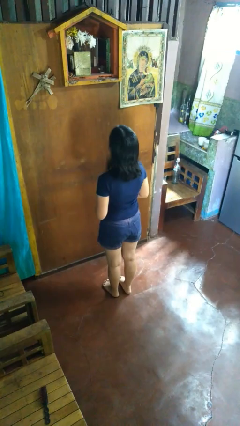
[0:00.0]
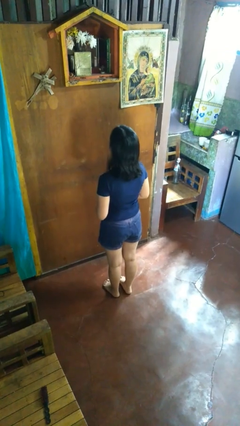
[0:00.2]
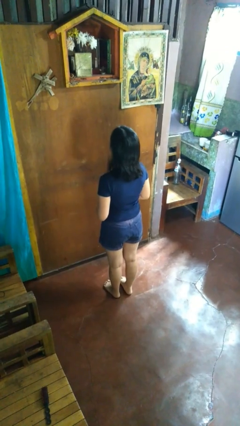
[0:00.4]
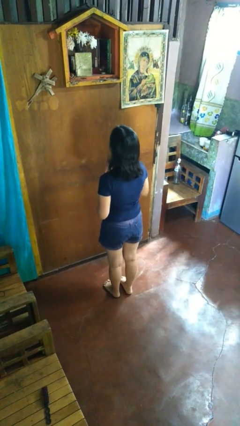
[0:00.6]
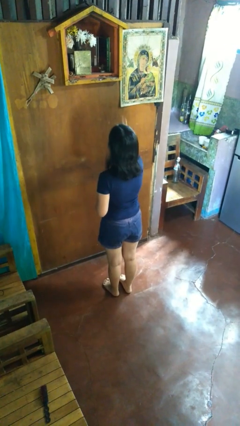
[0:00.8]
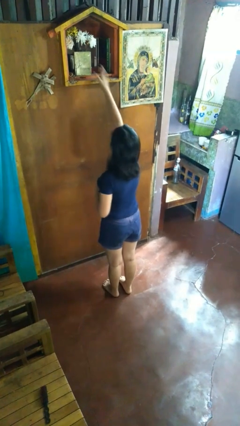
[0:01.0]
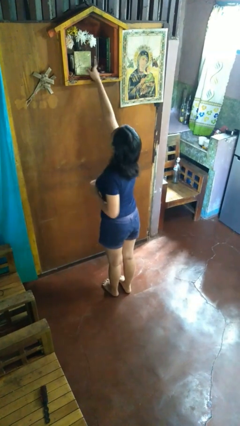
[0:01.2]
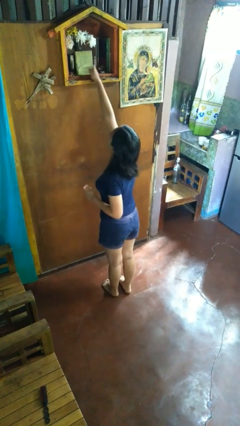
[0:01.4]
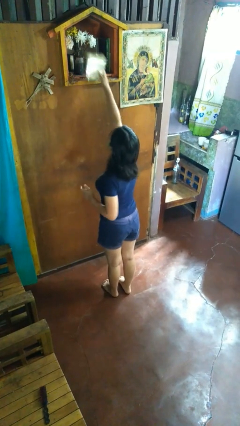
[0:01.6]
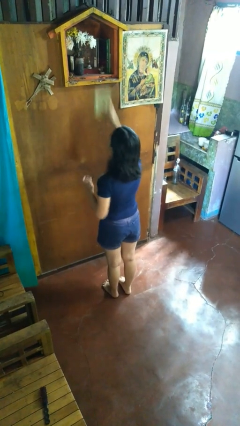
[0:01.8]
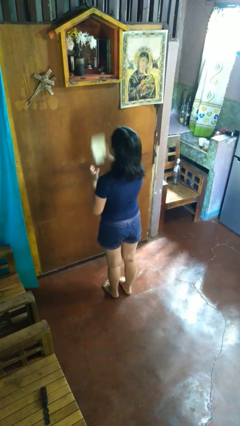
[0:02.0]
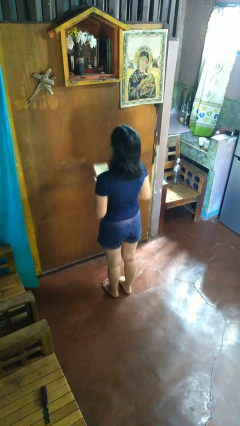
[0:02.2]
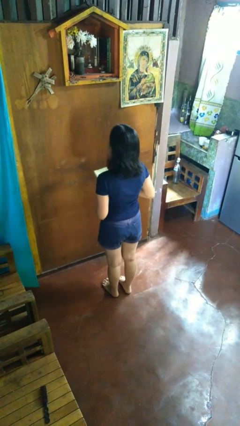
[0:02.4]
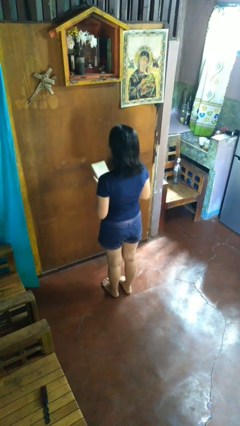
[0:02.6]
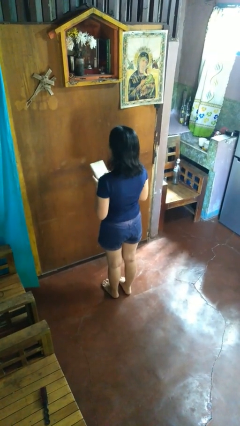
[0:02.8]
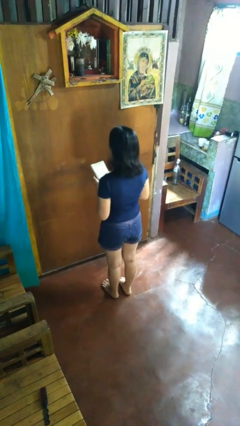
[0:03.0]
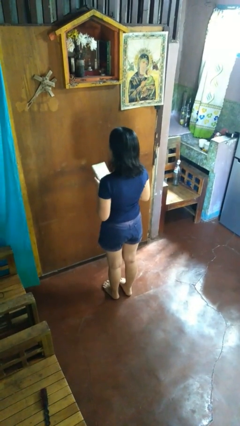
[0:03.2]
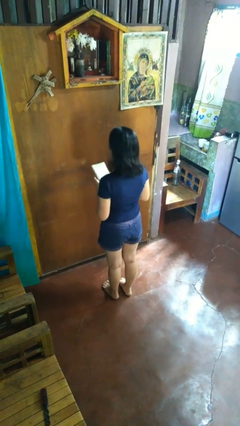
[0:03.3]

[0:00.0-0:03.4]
person picks up object from shelf

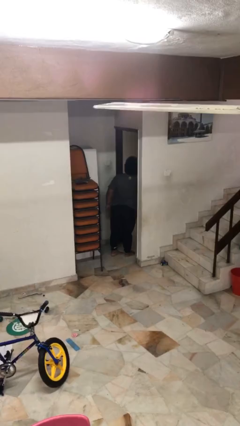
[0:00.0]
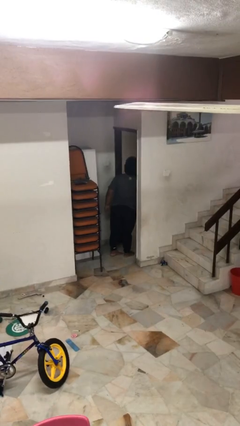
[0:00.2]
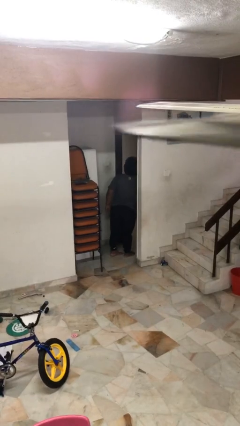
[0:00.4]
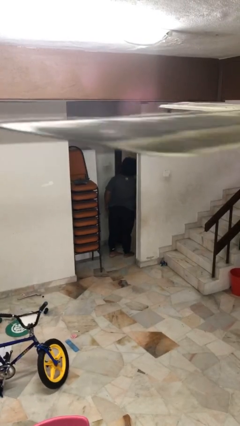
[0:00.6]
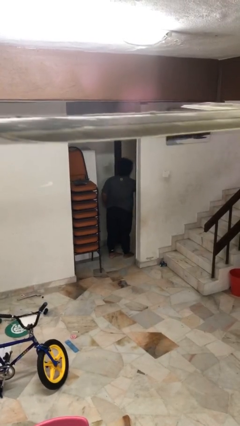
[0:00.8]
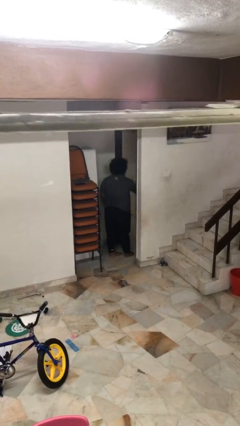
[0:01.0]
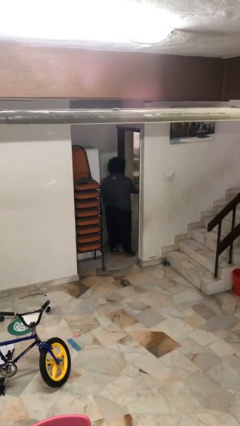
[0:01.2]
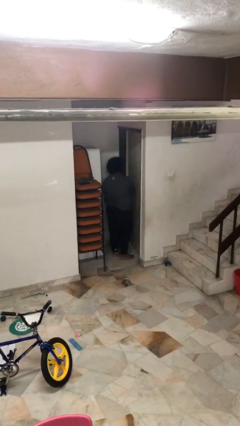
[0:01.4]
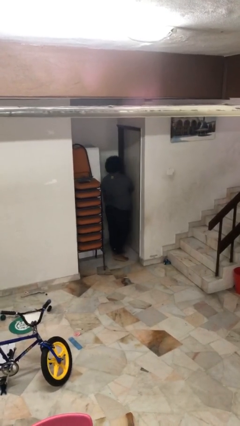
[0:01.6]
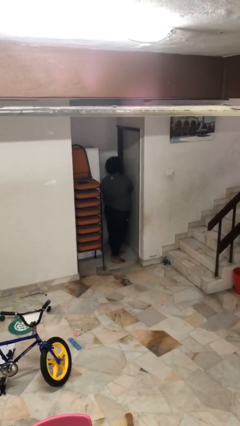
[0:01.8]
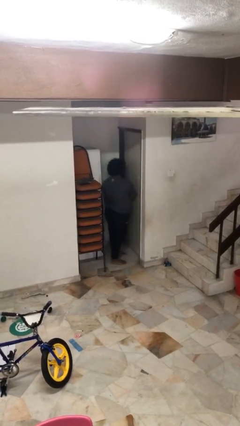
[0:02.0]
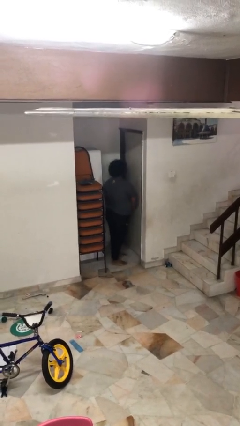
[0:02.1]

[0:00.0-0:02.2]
person closes facility door

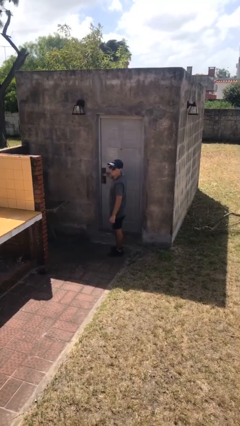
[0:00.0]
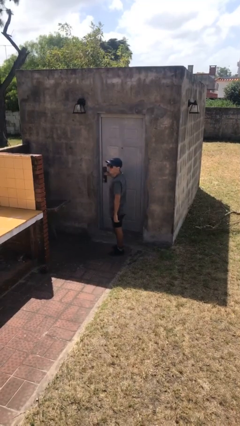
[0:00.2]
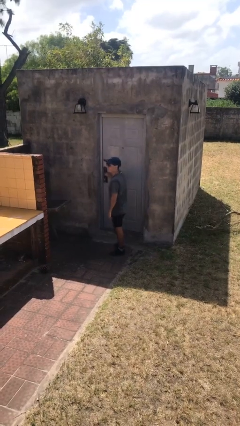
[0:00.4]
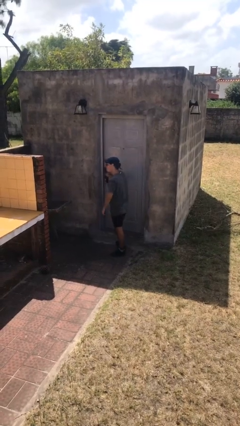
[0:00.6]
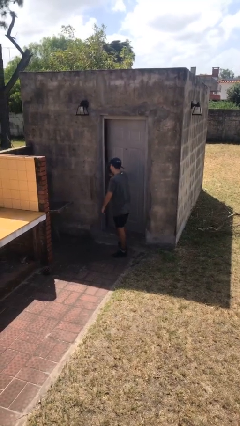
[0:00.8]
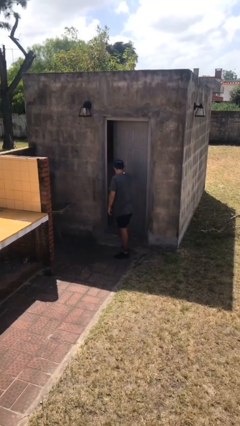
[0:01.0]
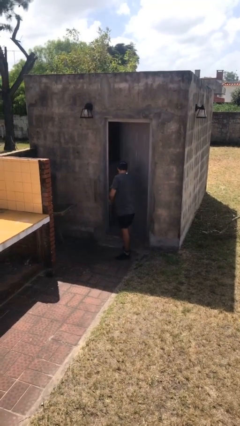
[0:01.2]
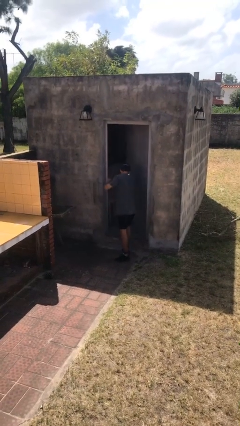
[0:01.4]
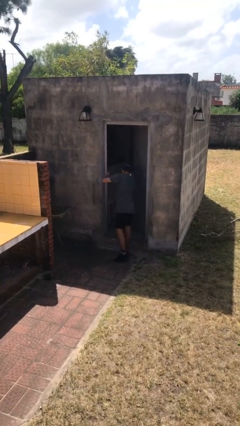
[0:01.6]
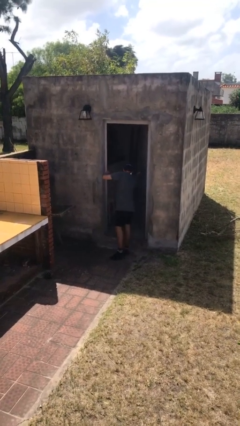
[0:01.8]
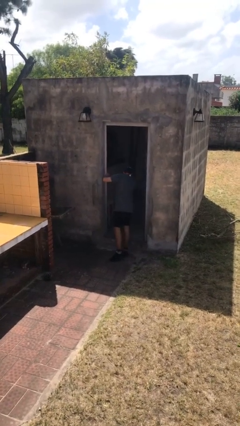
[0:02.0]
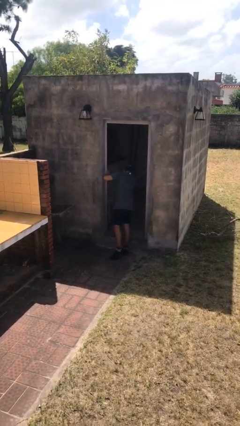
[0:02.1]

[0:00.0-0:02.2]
person opens facility door

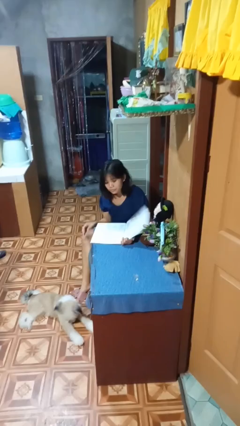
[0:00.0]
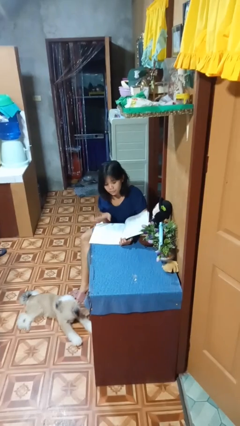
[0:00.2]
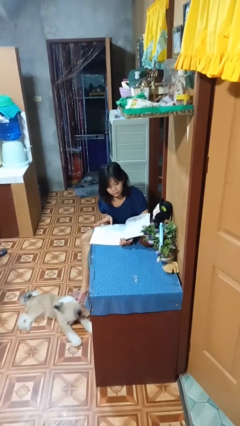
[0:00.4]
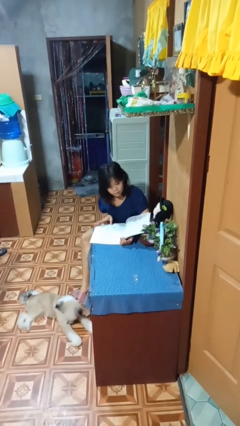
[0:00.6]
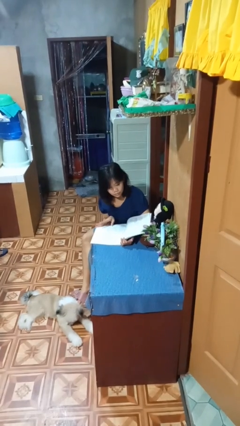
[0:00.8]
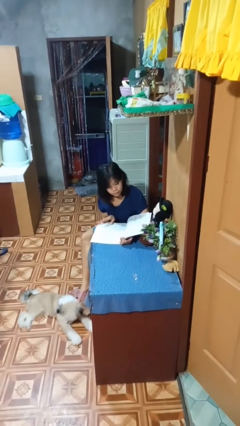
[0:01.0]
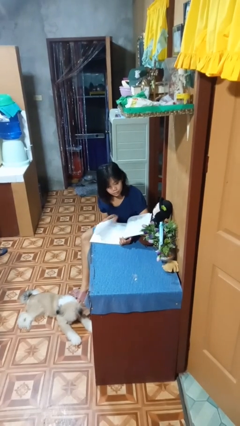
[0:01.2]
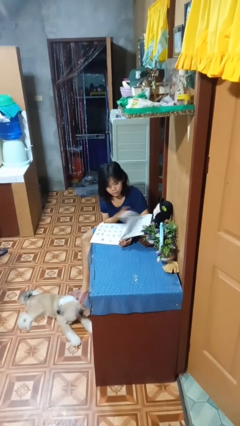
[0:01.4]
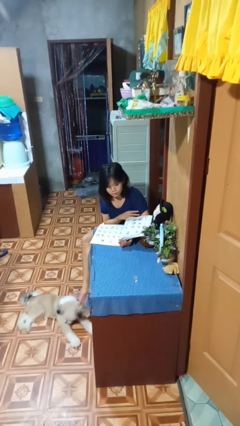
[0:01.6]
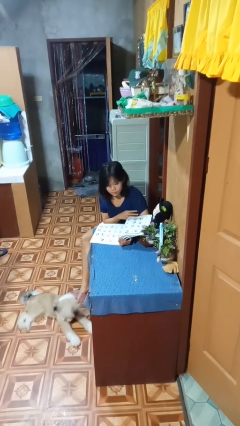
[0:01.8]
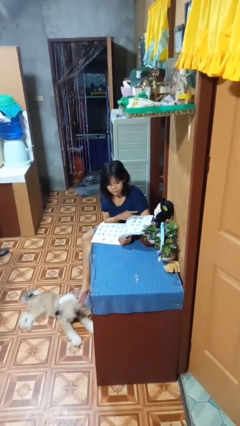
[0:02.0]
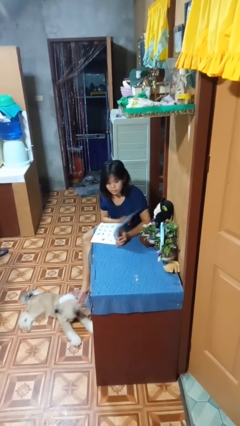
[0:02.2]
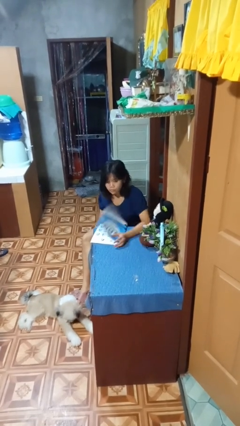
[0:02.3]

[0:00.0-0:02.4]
person reads magazine

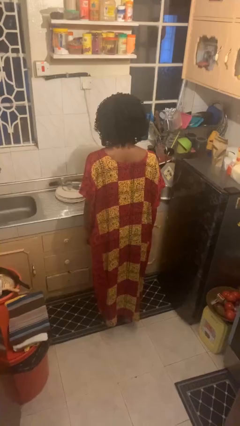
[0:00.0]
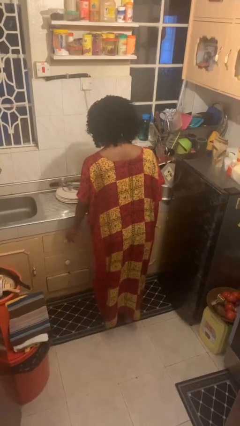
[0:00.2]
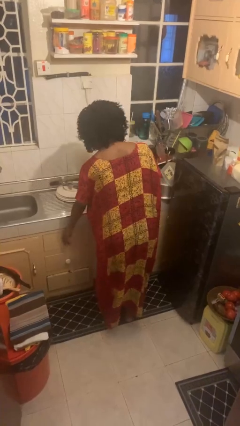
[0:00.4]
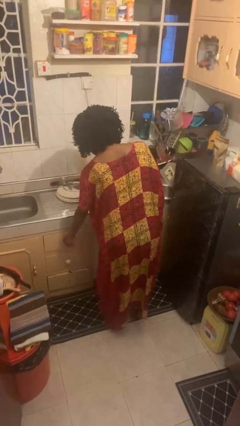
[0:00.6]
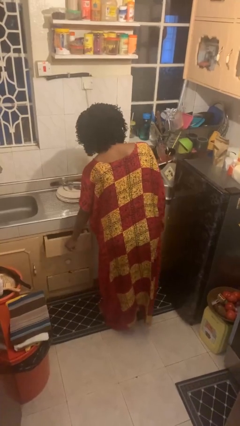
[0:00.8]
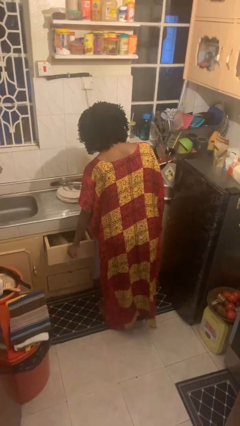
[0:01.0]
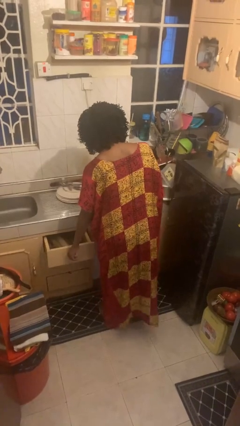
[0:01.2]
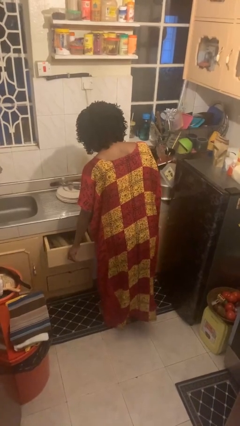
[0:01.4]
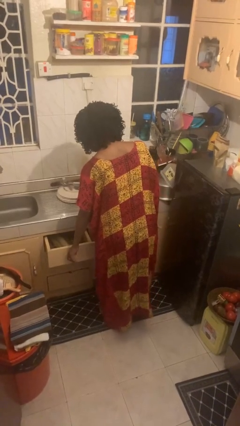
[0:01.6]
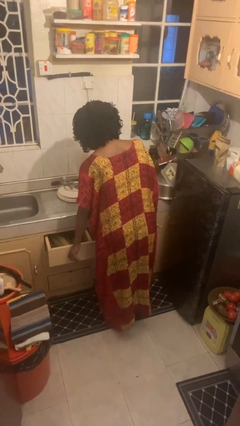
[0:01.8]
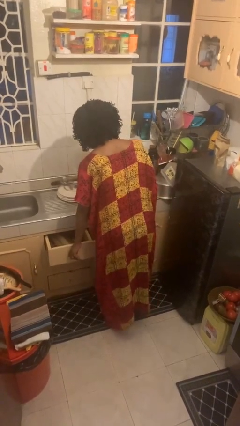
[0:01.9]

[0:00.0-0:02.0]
person opens kitchen drawer

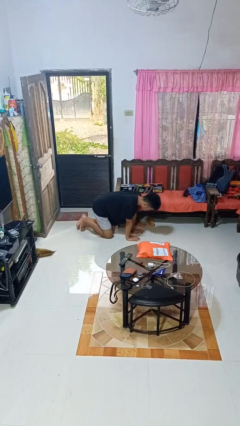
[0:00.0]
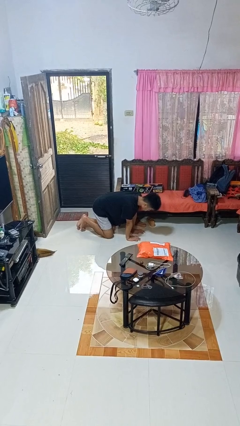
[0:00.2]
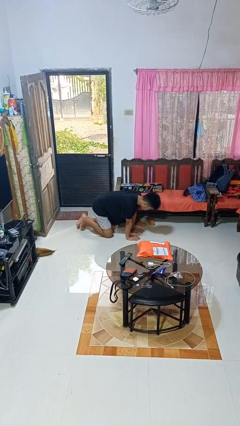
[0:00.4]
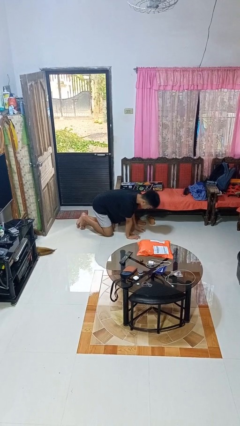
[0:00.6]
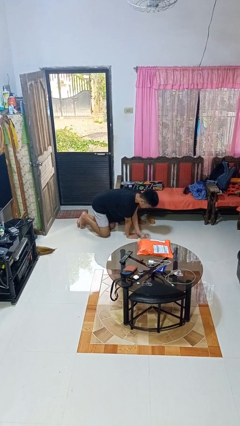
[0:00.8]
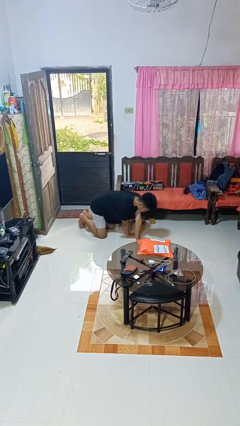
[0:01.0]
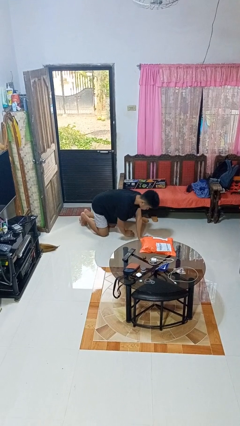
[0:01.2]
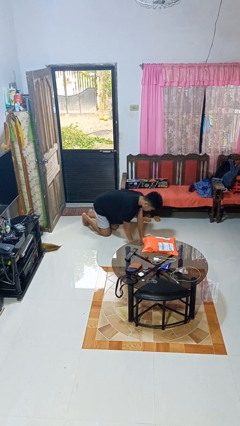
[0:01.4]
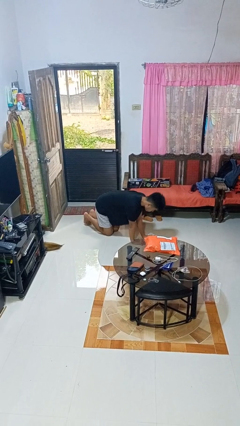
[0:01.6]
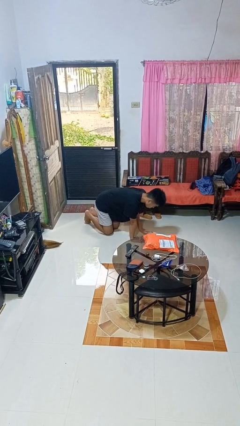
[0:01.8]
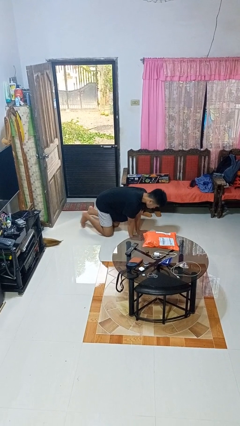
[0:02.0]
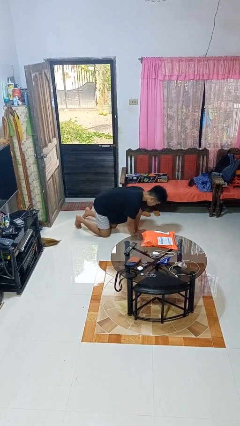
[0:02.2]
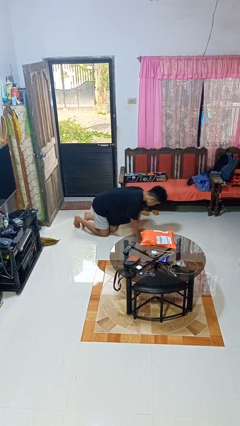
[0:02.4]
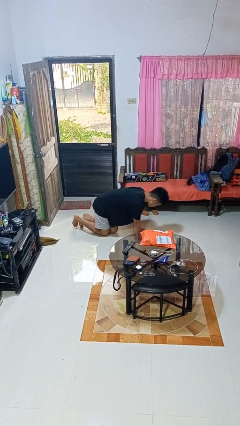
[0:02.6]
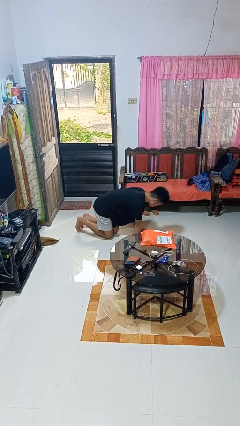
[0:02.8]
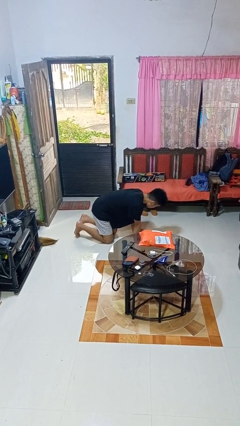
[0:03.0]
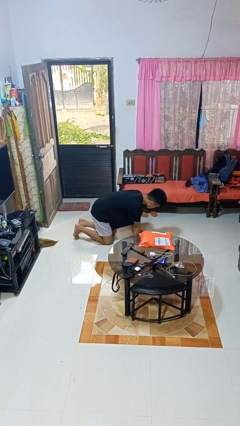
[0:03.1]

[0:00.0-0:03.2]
person crawls

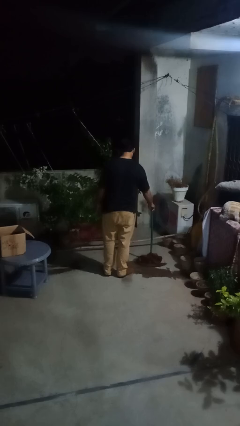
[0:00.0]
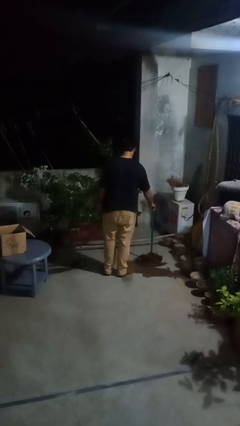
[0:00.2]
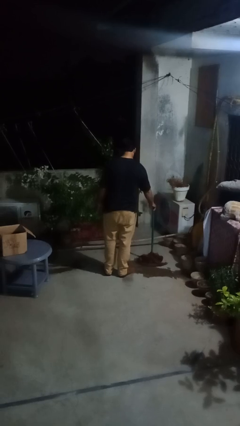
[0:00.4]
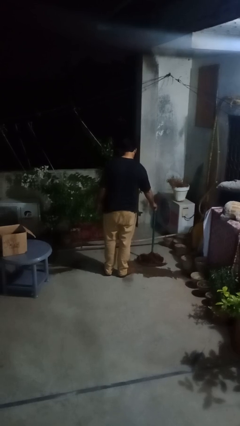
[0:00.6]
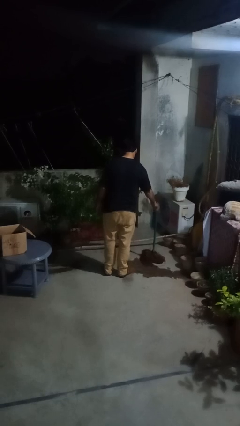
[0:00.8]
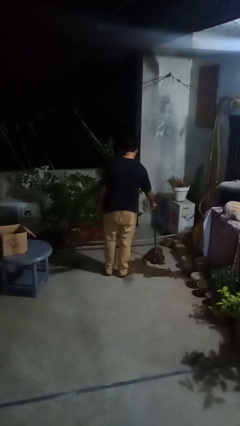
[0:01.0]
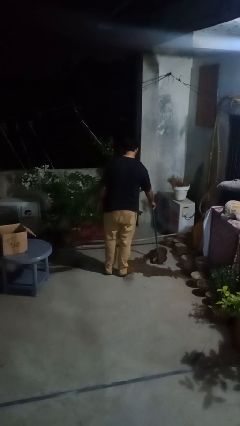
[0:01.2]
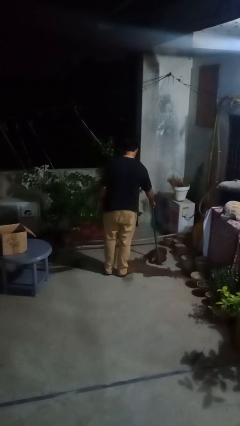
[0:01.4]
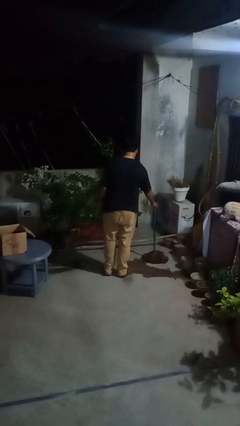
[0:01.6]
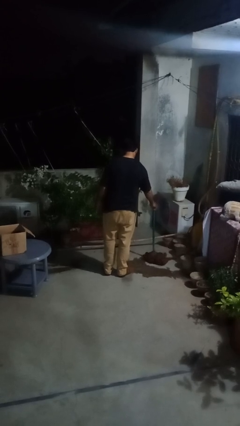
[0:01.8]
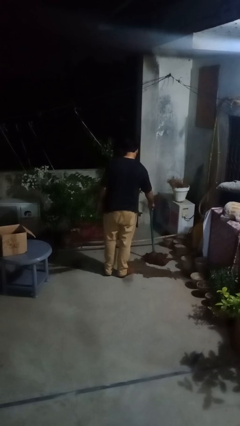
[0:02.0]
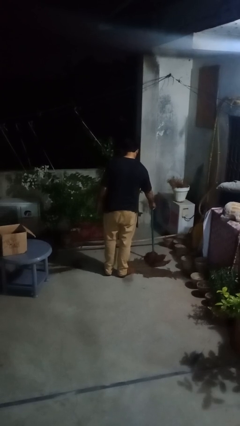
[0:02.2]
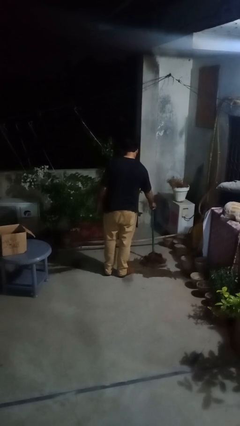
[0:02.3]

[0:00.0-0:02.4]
person mops
